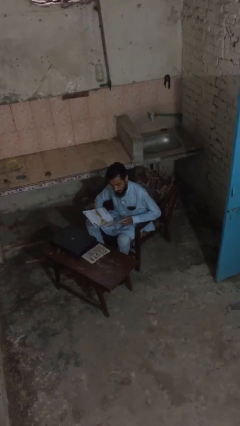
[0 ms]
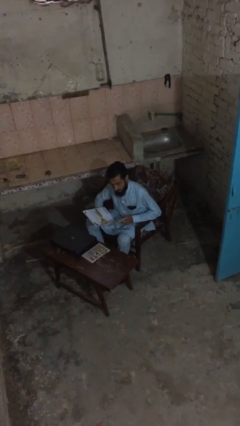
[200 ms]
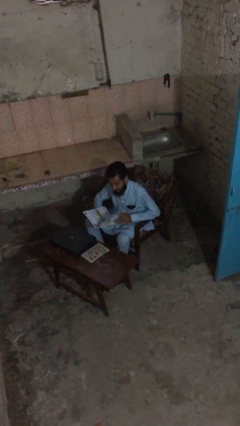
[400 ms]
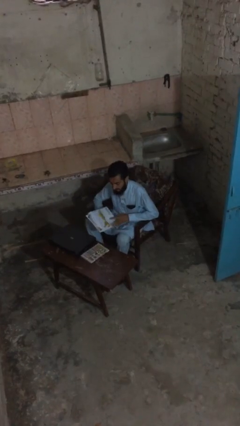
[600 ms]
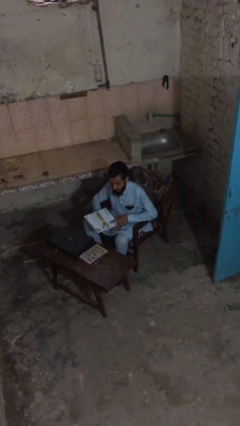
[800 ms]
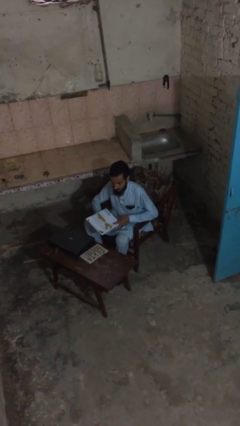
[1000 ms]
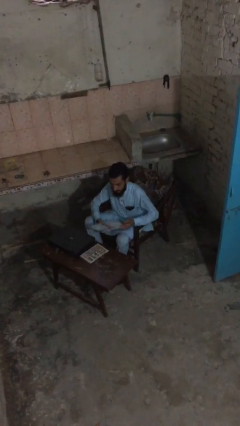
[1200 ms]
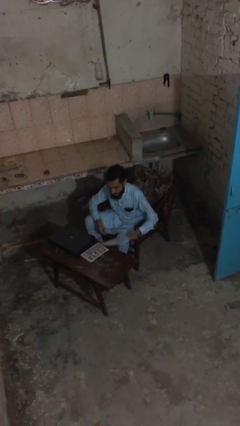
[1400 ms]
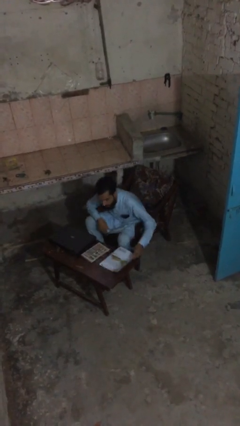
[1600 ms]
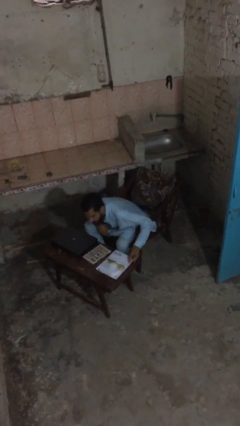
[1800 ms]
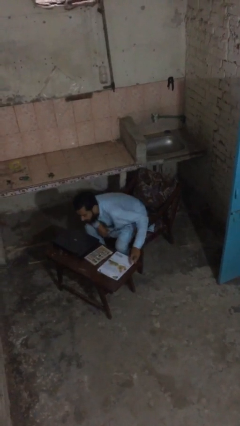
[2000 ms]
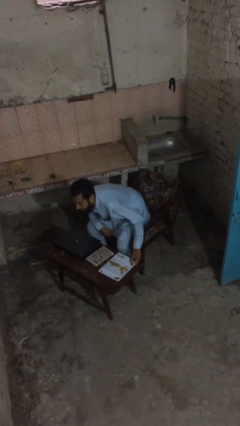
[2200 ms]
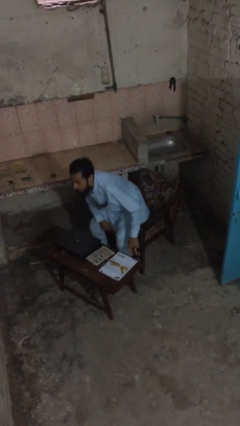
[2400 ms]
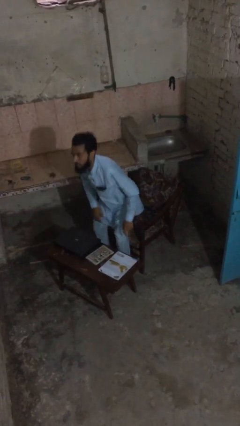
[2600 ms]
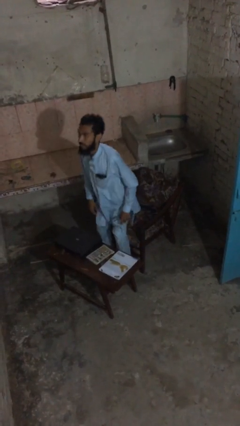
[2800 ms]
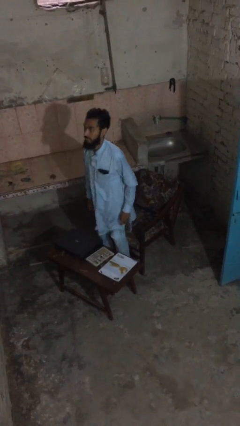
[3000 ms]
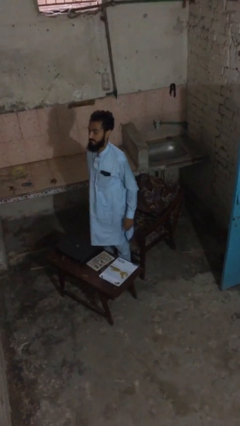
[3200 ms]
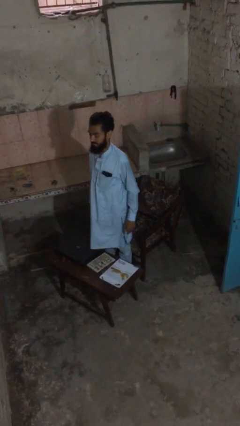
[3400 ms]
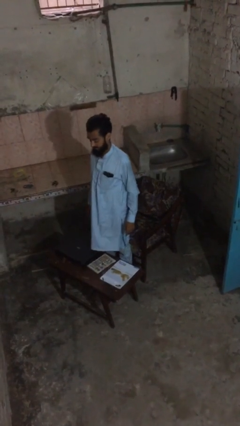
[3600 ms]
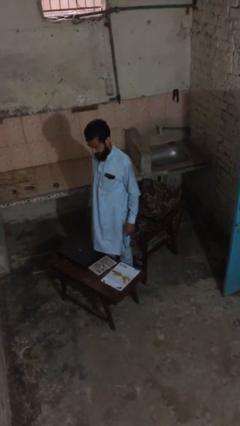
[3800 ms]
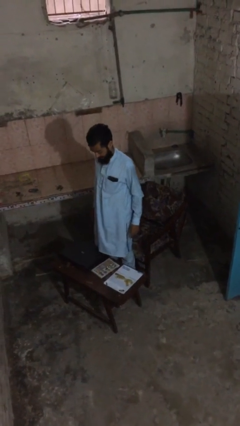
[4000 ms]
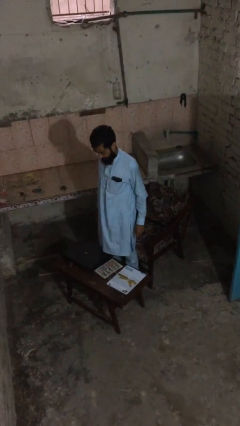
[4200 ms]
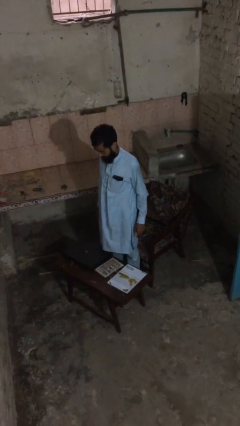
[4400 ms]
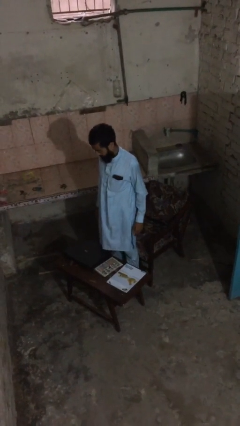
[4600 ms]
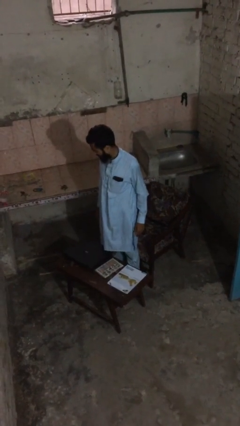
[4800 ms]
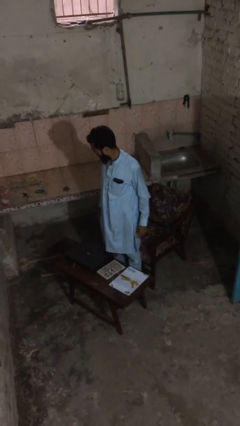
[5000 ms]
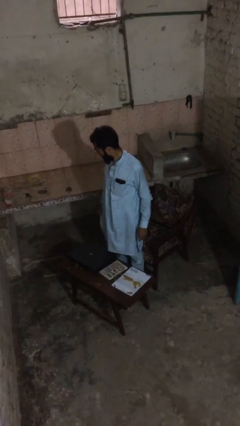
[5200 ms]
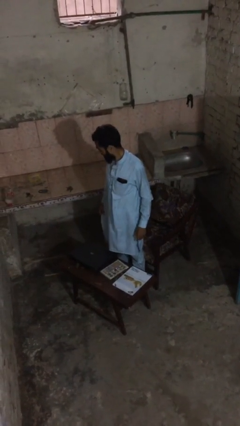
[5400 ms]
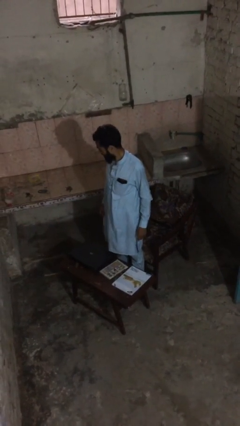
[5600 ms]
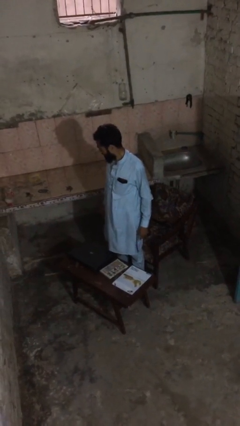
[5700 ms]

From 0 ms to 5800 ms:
person stands up

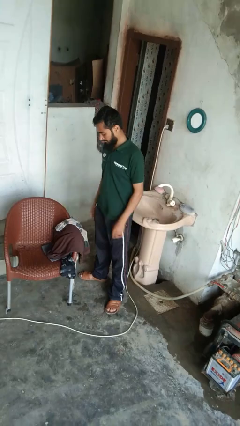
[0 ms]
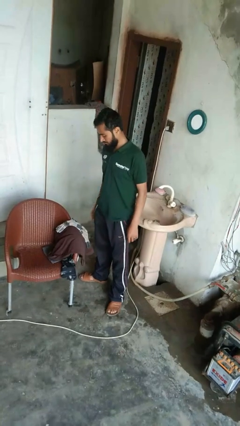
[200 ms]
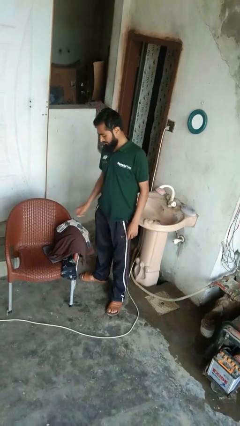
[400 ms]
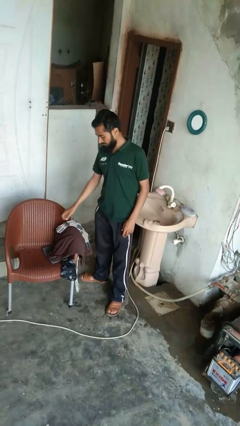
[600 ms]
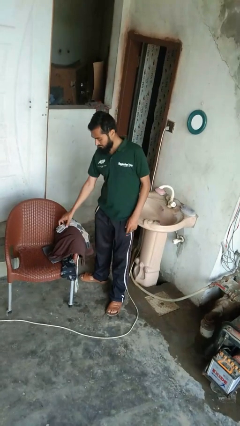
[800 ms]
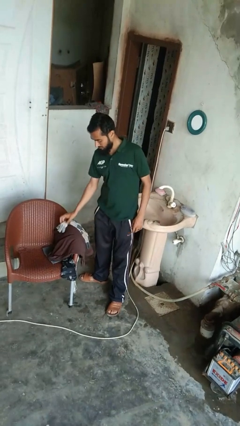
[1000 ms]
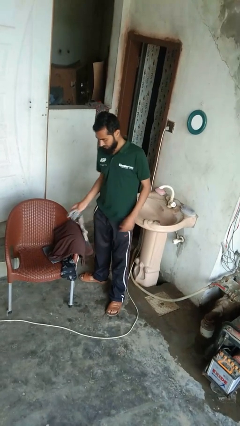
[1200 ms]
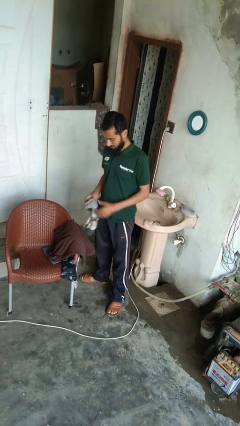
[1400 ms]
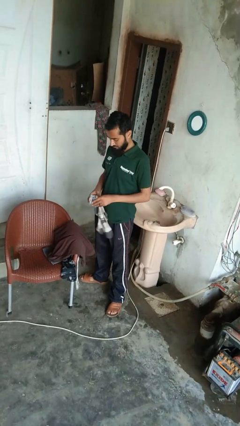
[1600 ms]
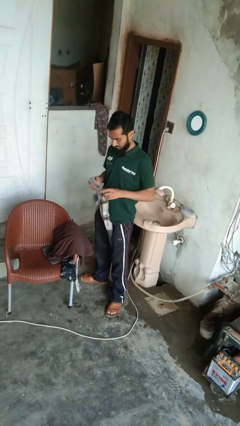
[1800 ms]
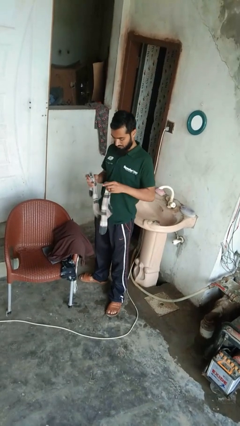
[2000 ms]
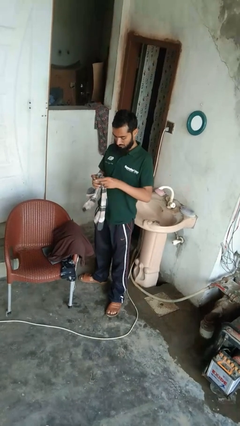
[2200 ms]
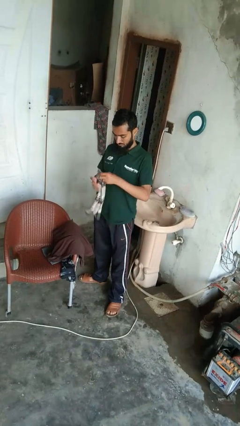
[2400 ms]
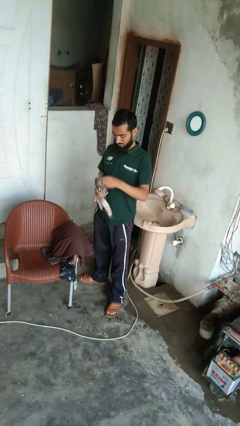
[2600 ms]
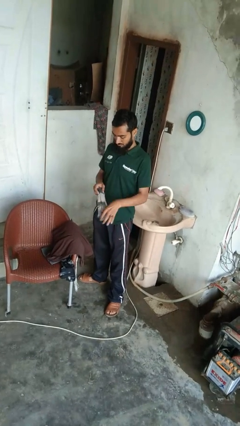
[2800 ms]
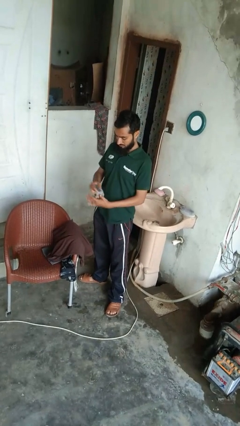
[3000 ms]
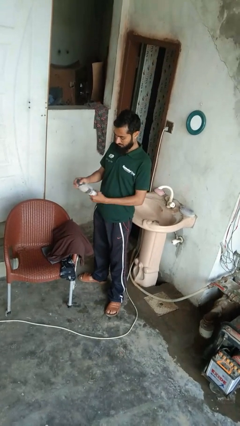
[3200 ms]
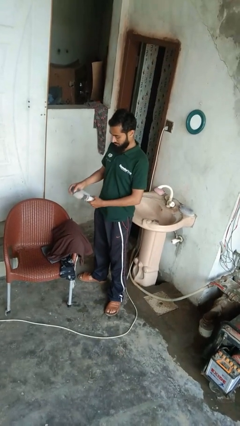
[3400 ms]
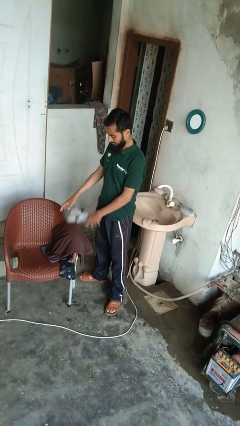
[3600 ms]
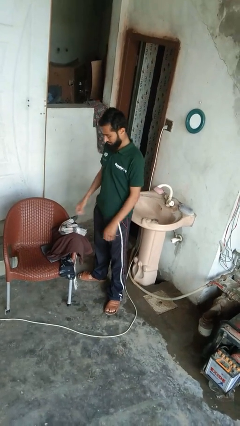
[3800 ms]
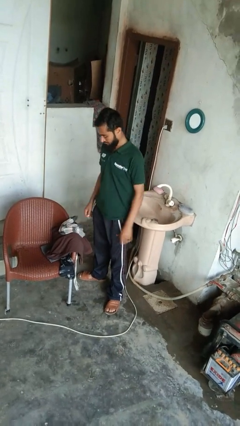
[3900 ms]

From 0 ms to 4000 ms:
person folds socks

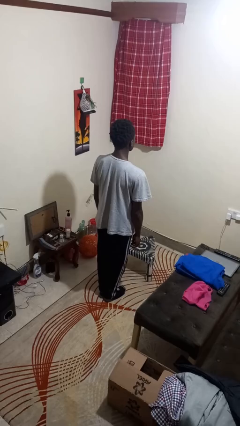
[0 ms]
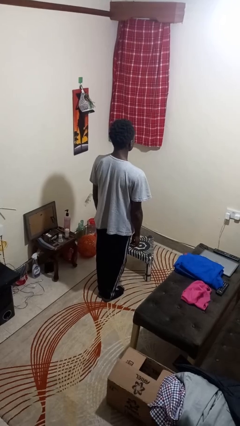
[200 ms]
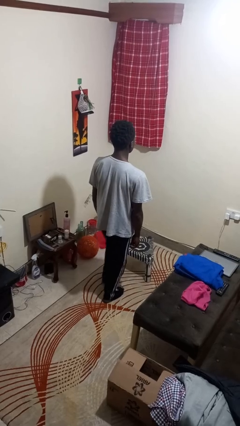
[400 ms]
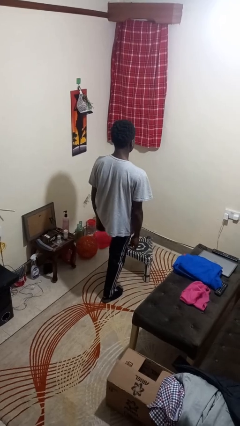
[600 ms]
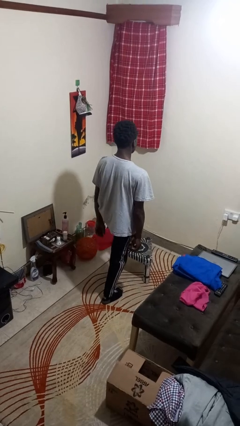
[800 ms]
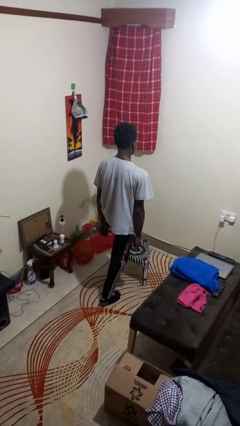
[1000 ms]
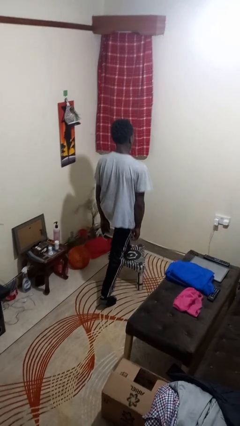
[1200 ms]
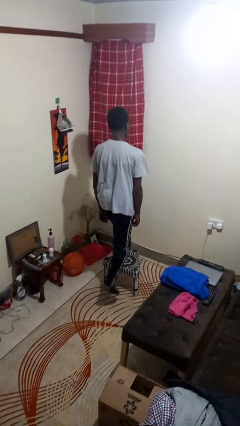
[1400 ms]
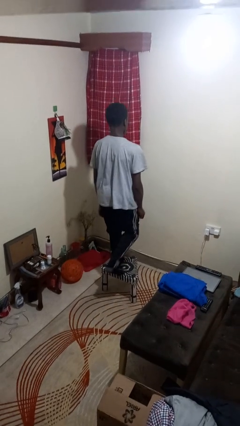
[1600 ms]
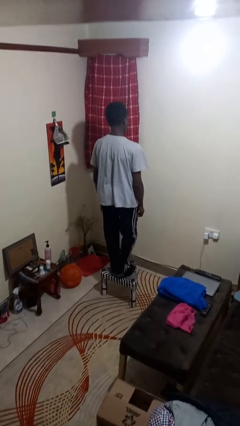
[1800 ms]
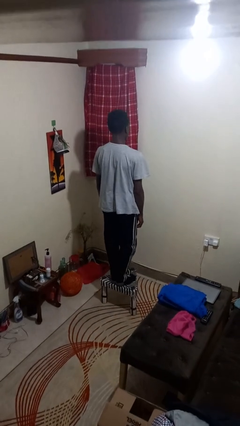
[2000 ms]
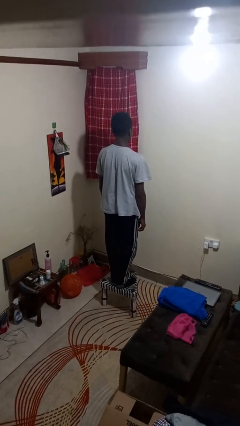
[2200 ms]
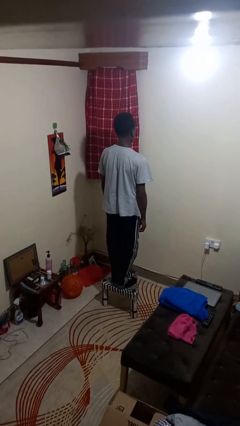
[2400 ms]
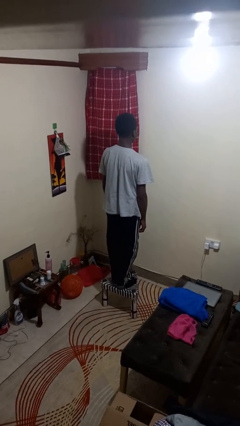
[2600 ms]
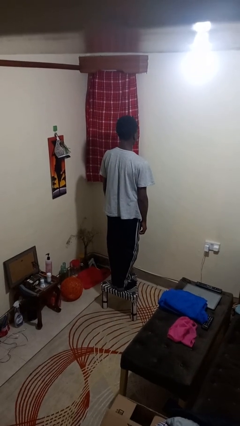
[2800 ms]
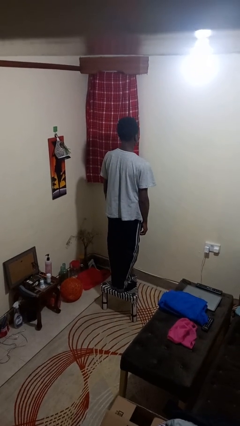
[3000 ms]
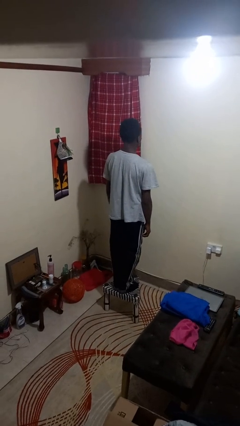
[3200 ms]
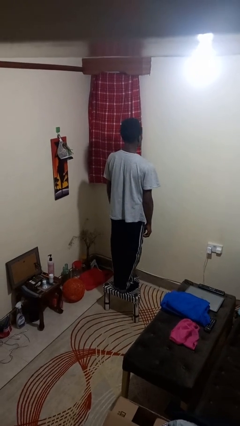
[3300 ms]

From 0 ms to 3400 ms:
person climbs on chair

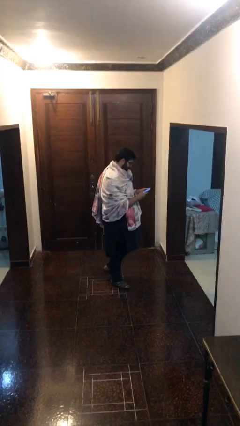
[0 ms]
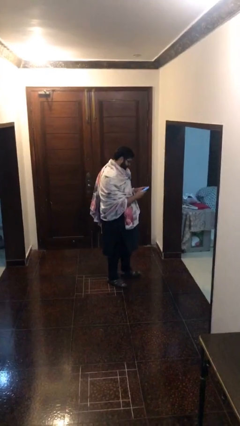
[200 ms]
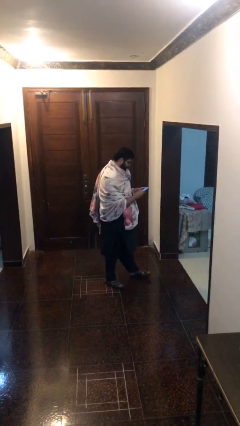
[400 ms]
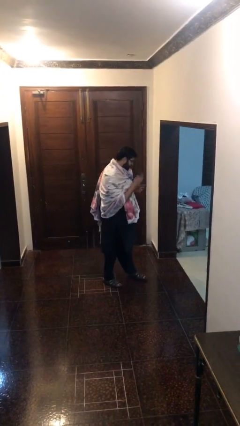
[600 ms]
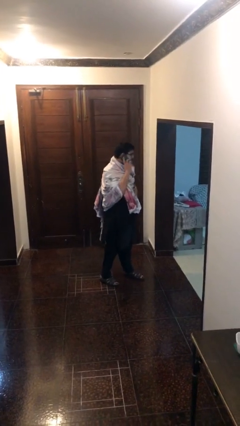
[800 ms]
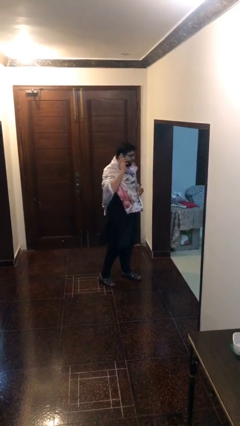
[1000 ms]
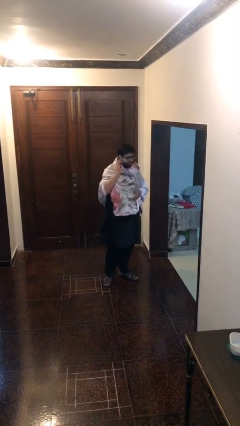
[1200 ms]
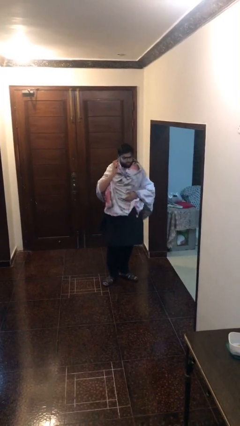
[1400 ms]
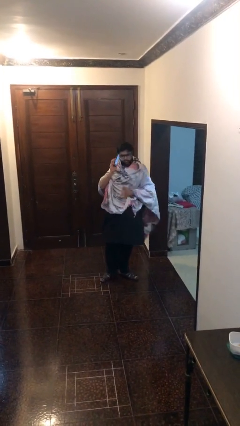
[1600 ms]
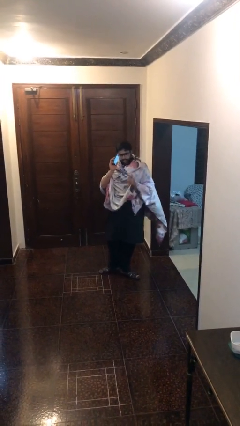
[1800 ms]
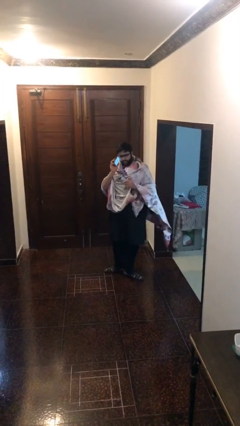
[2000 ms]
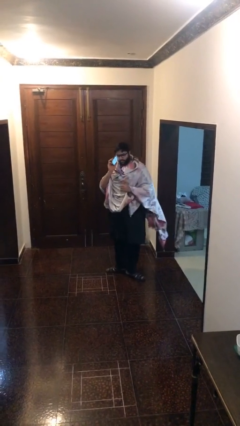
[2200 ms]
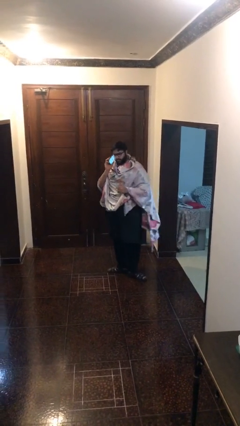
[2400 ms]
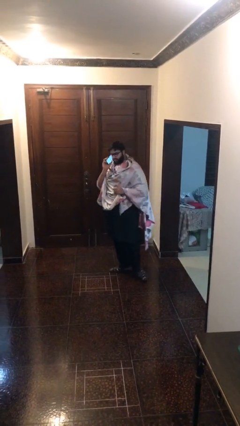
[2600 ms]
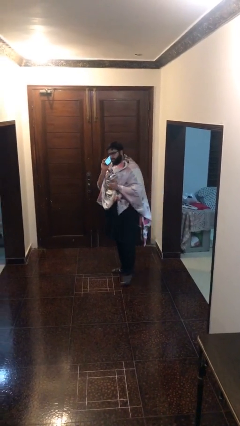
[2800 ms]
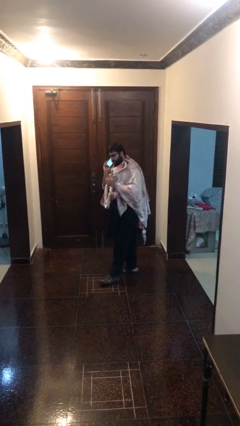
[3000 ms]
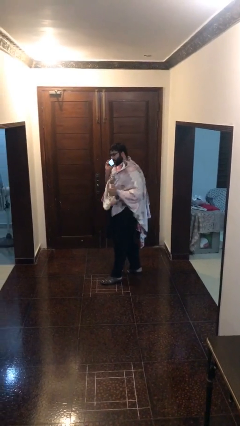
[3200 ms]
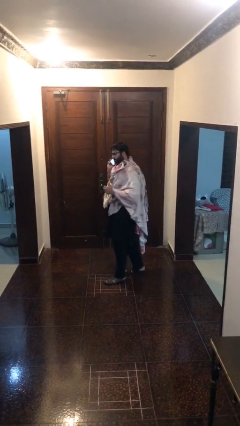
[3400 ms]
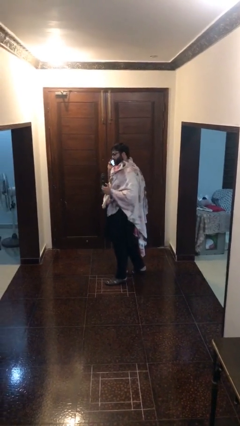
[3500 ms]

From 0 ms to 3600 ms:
person talks on phone

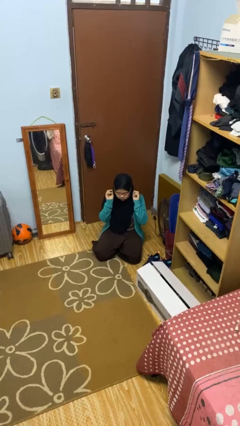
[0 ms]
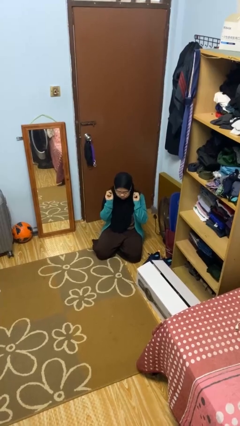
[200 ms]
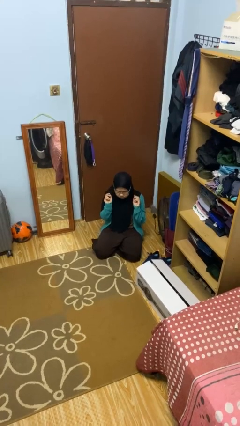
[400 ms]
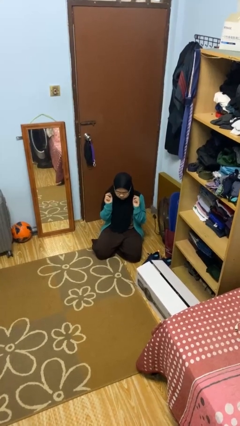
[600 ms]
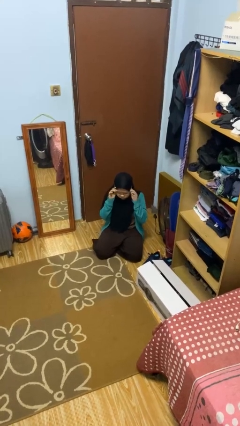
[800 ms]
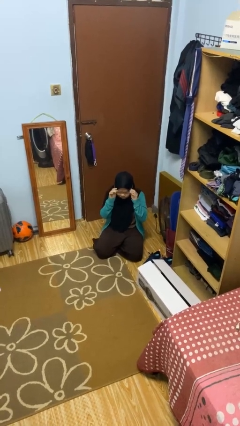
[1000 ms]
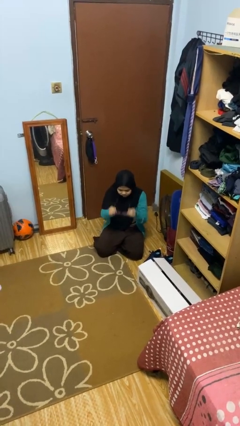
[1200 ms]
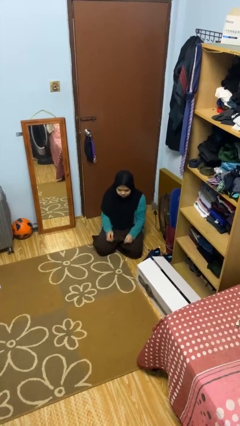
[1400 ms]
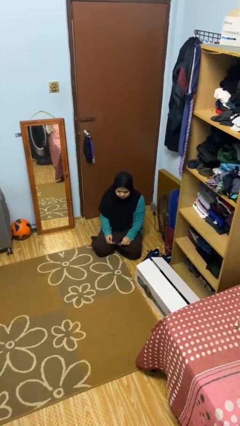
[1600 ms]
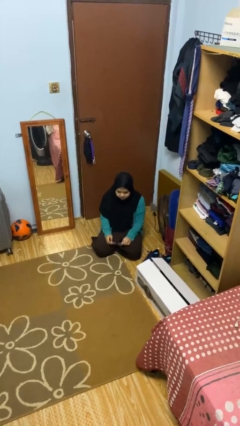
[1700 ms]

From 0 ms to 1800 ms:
person takes off glasses
